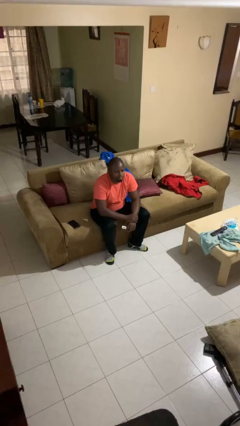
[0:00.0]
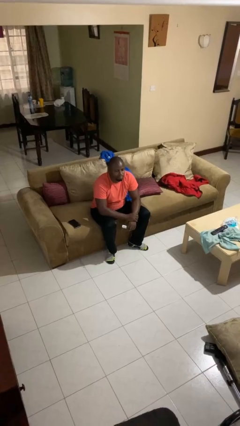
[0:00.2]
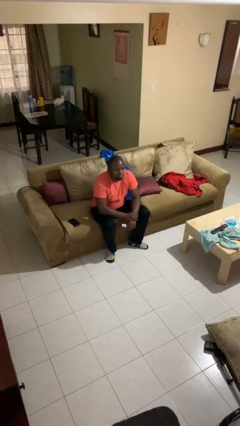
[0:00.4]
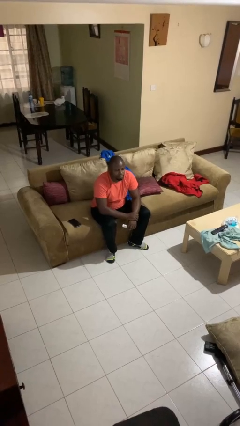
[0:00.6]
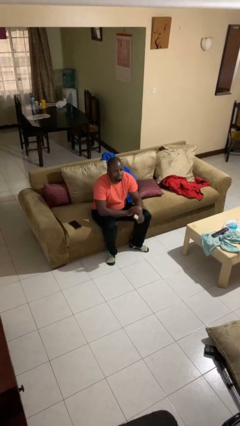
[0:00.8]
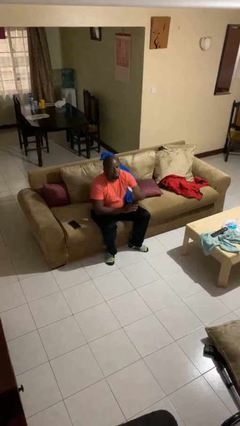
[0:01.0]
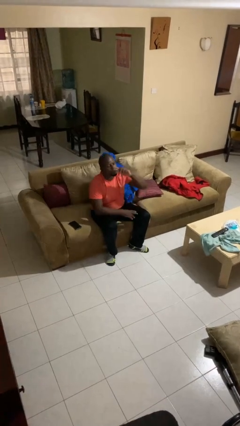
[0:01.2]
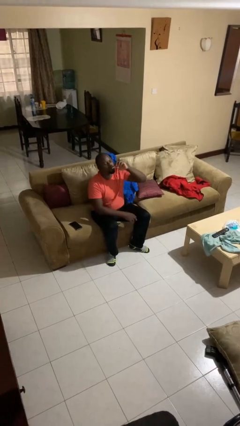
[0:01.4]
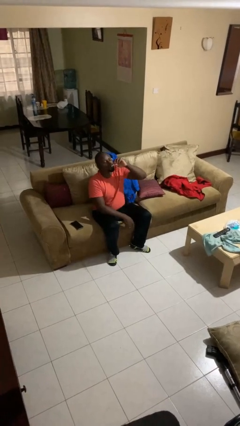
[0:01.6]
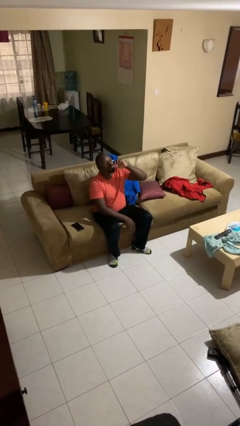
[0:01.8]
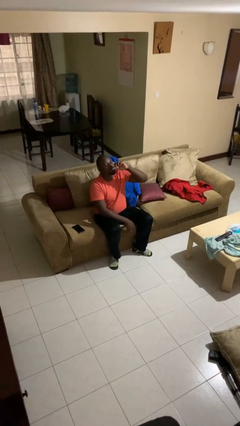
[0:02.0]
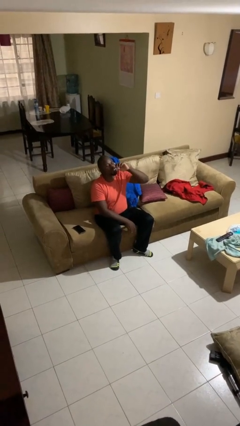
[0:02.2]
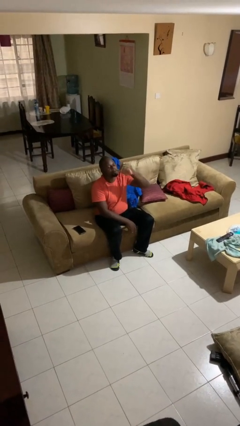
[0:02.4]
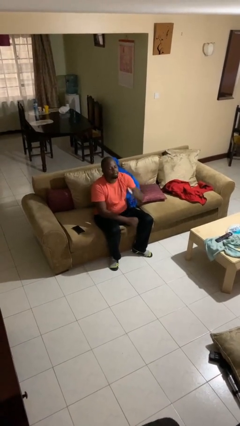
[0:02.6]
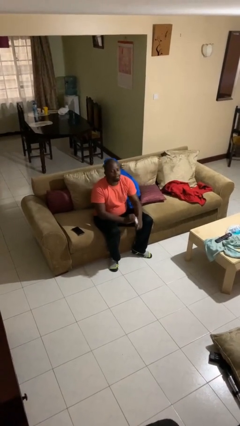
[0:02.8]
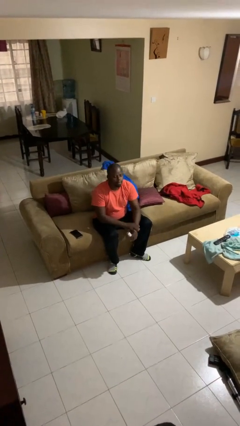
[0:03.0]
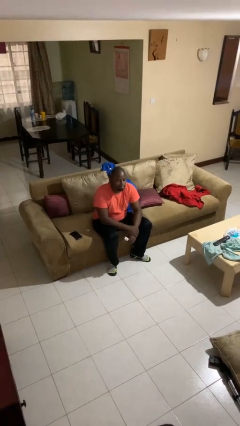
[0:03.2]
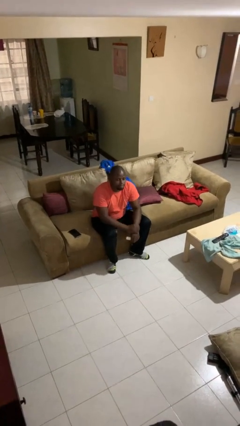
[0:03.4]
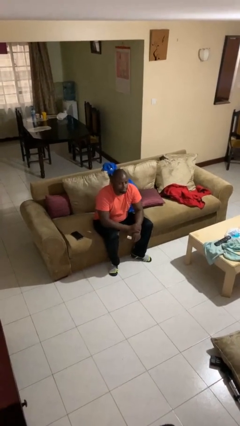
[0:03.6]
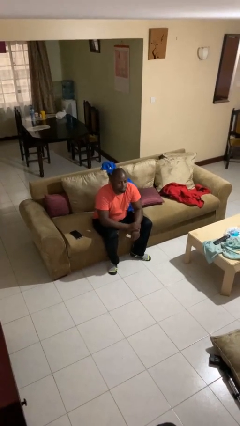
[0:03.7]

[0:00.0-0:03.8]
person vapes

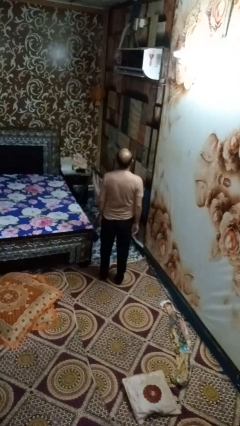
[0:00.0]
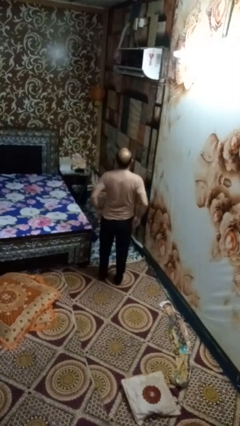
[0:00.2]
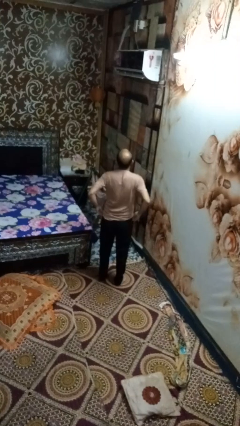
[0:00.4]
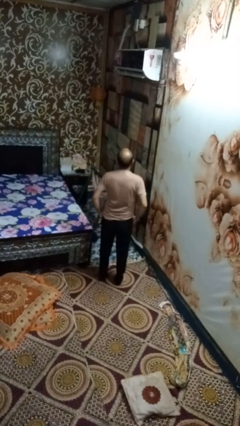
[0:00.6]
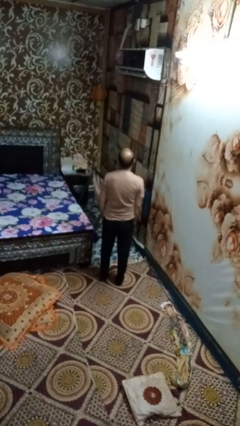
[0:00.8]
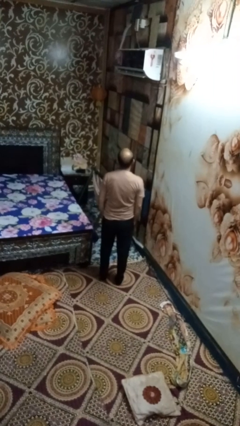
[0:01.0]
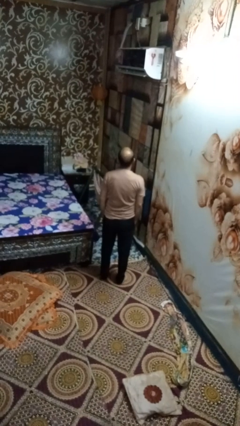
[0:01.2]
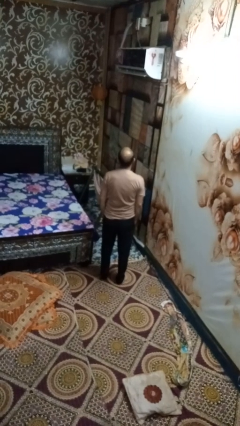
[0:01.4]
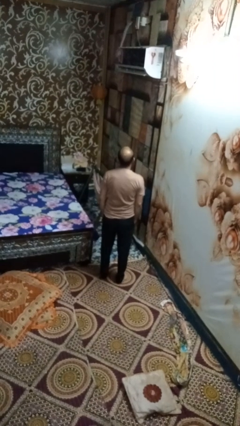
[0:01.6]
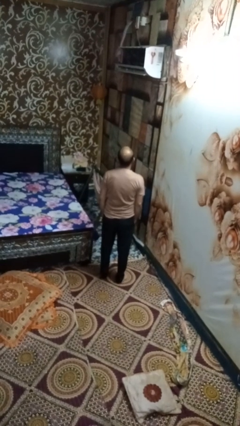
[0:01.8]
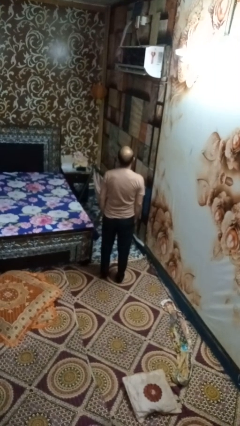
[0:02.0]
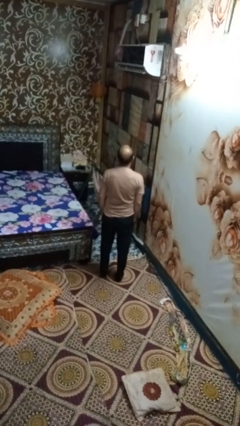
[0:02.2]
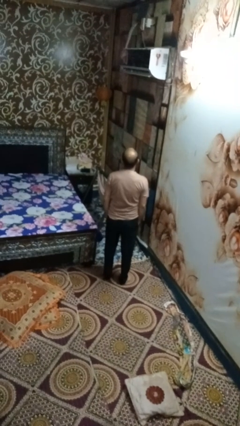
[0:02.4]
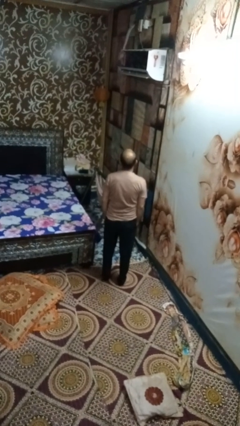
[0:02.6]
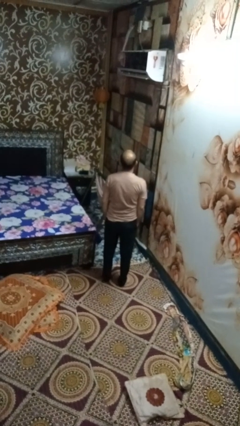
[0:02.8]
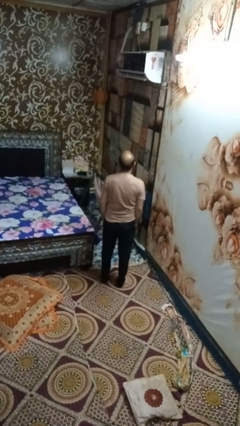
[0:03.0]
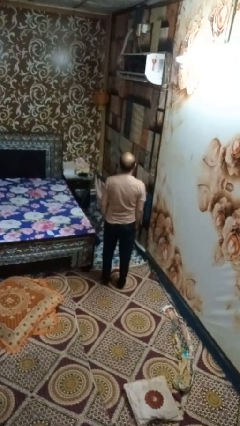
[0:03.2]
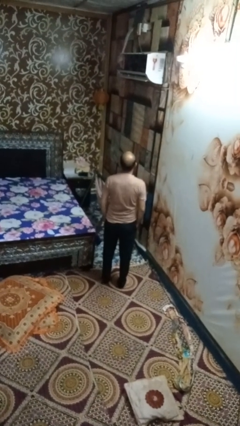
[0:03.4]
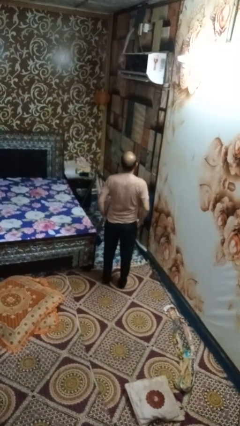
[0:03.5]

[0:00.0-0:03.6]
person puts hands in back pockets

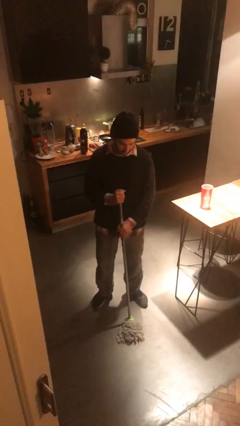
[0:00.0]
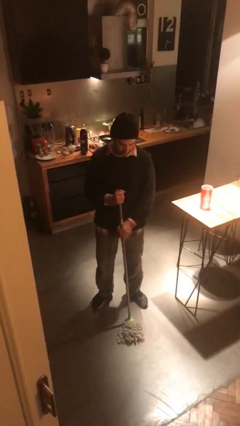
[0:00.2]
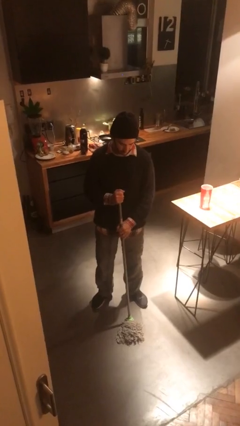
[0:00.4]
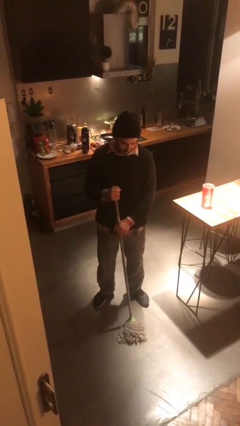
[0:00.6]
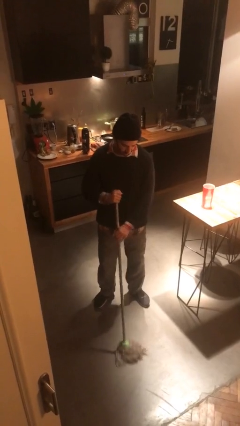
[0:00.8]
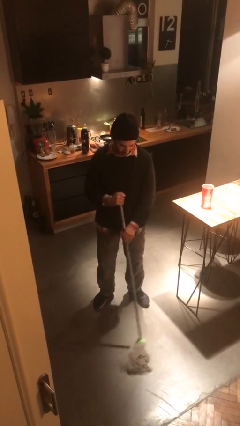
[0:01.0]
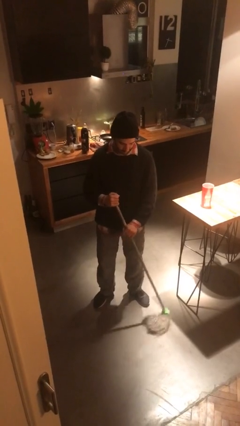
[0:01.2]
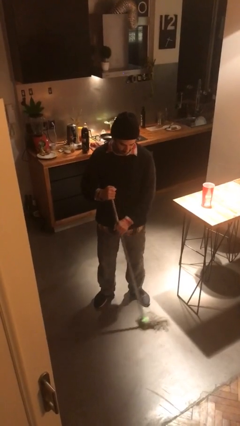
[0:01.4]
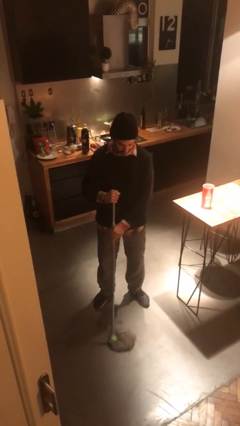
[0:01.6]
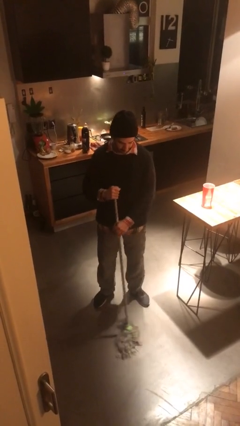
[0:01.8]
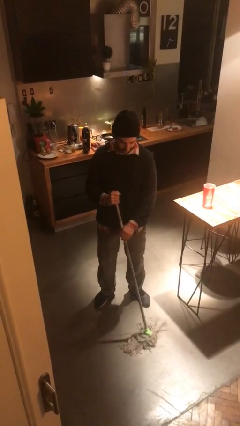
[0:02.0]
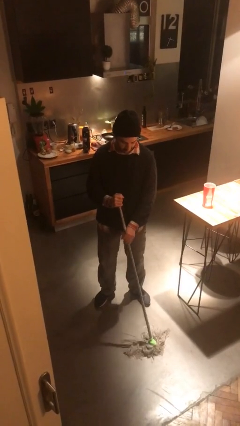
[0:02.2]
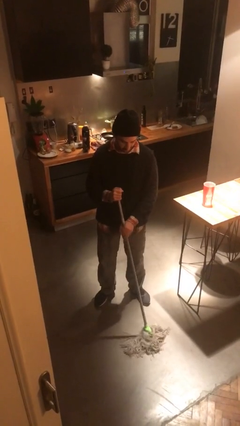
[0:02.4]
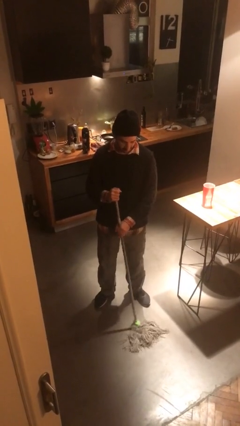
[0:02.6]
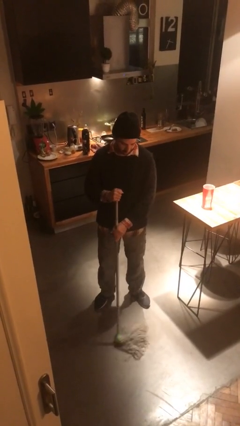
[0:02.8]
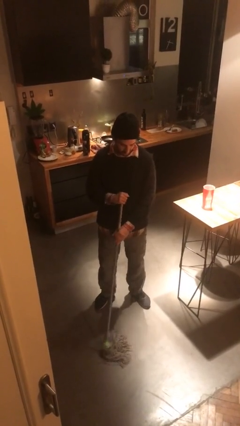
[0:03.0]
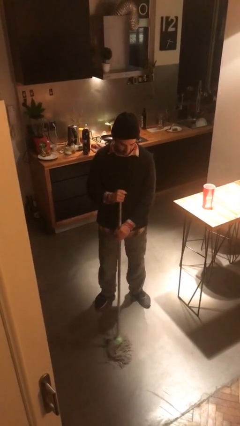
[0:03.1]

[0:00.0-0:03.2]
person mops

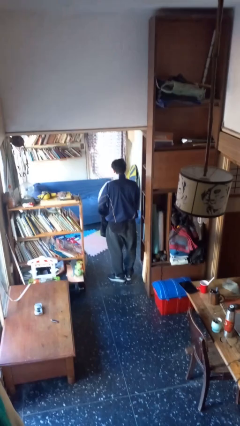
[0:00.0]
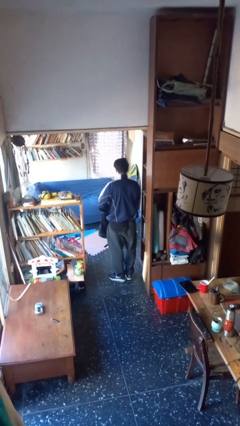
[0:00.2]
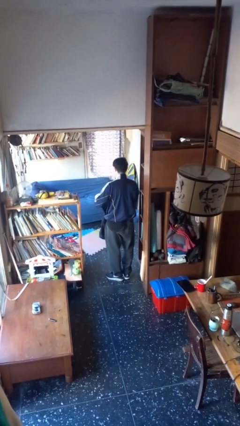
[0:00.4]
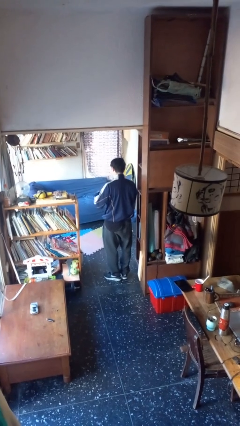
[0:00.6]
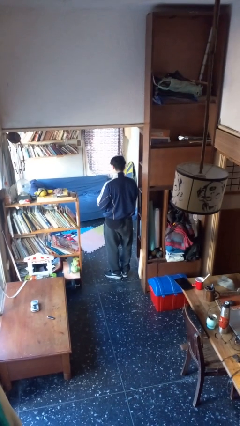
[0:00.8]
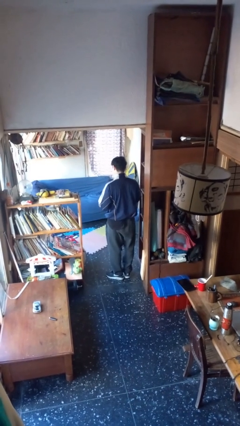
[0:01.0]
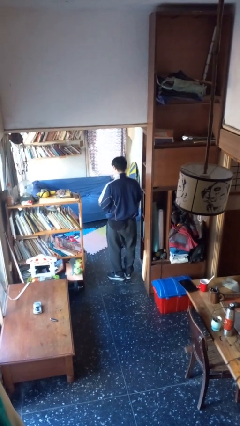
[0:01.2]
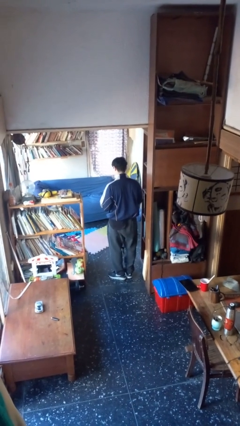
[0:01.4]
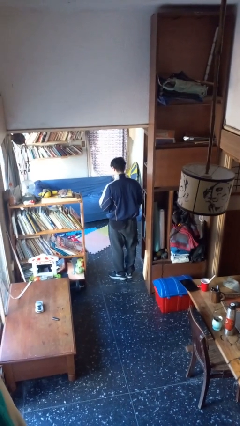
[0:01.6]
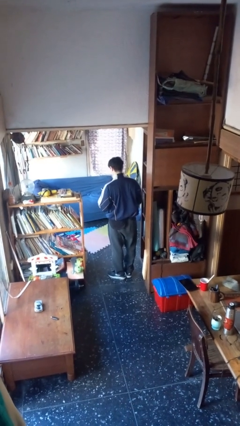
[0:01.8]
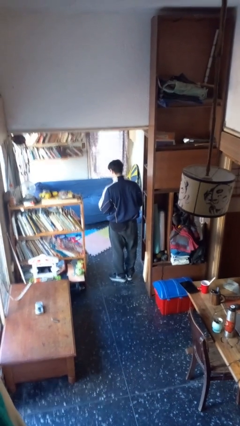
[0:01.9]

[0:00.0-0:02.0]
person takes object from backpack

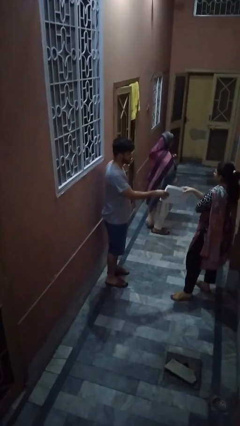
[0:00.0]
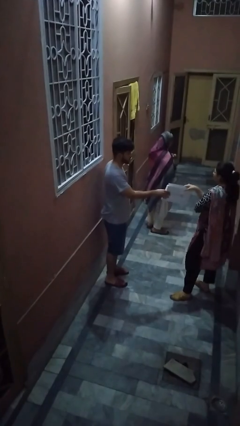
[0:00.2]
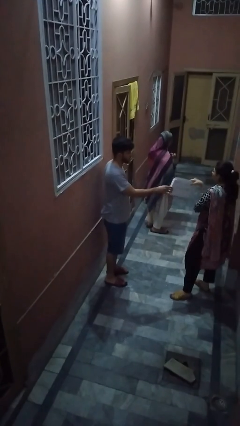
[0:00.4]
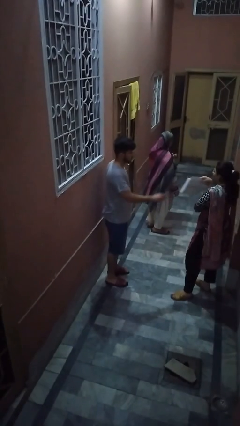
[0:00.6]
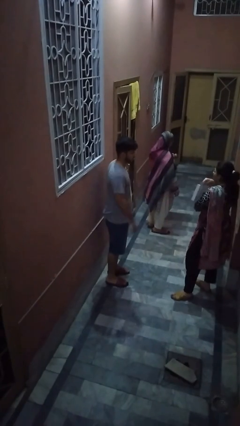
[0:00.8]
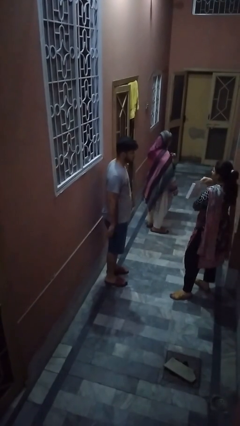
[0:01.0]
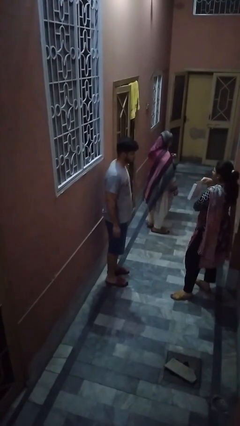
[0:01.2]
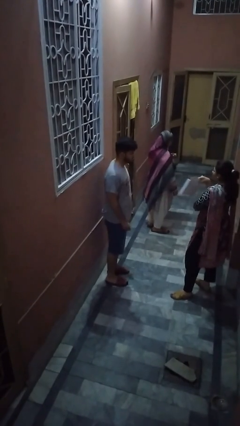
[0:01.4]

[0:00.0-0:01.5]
person transfers object to person

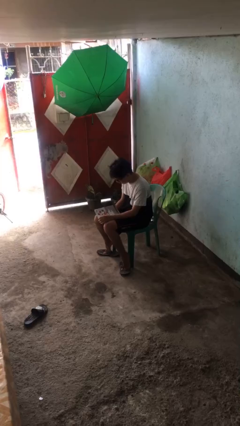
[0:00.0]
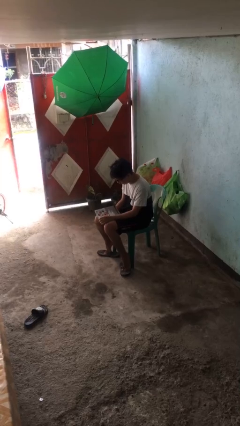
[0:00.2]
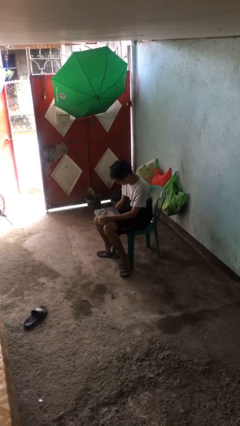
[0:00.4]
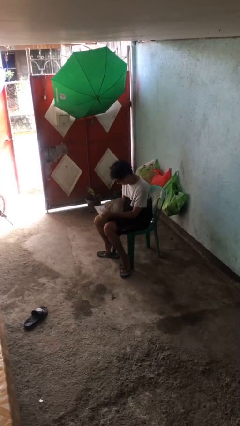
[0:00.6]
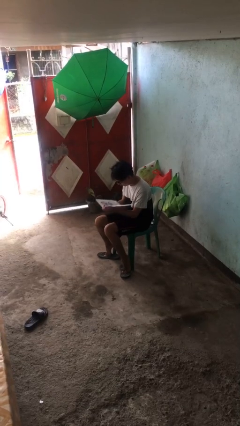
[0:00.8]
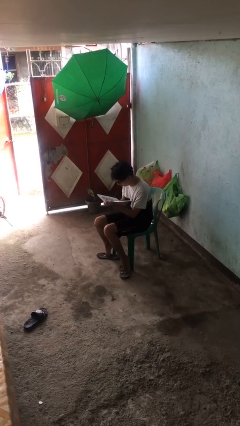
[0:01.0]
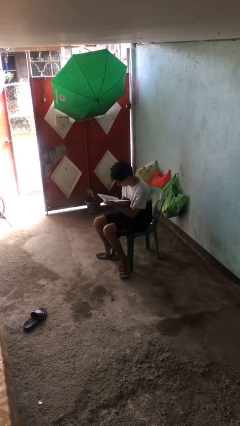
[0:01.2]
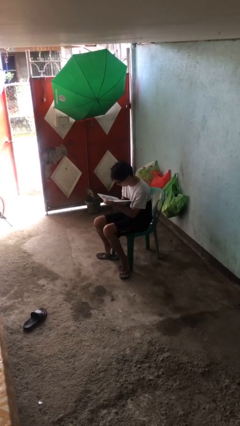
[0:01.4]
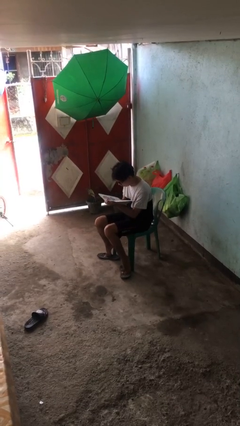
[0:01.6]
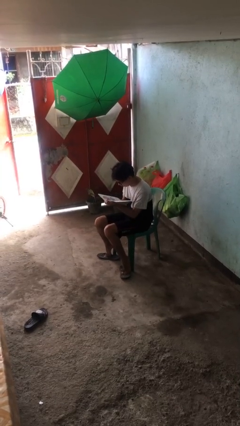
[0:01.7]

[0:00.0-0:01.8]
person reads document

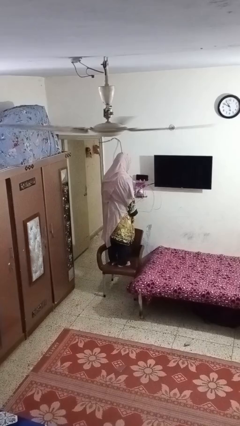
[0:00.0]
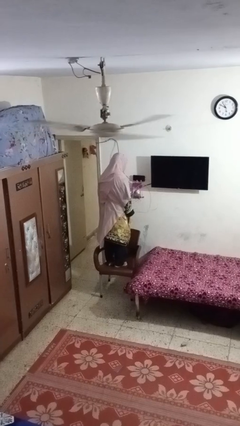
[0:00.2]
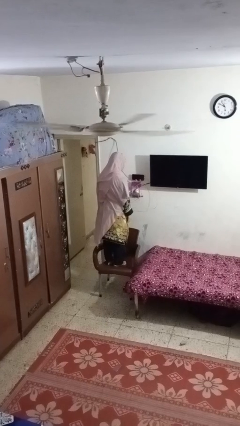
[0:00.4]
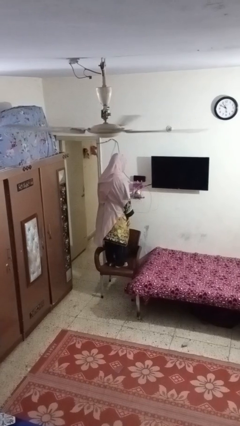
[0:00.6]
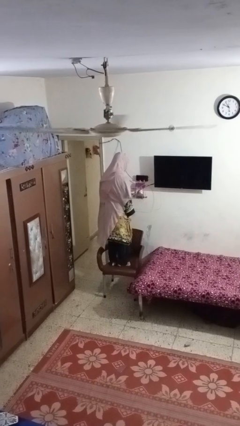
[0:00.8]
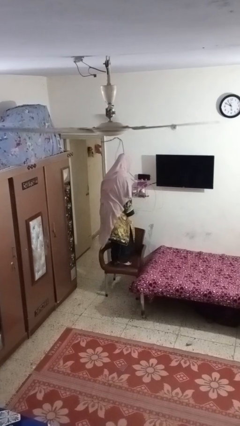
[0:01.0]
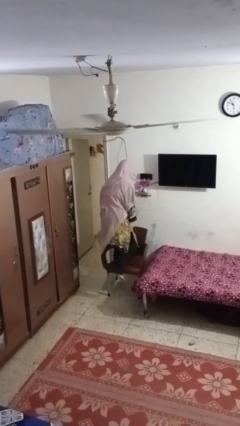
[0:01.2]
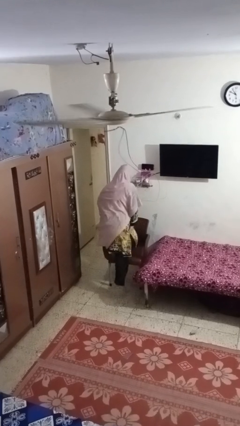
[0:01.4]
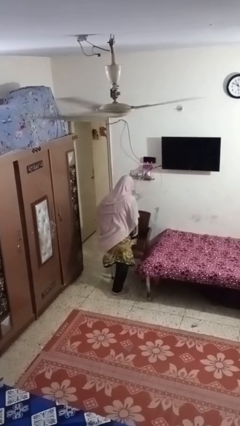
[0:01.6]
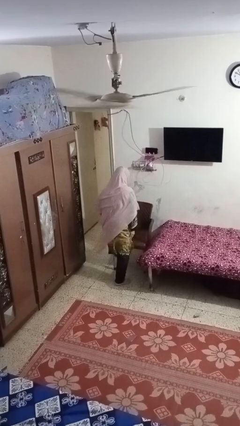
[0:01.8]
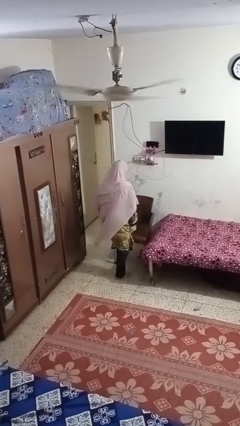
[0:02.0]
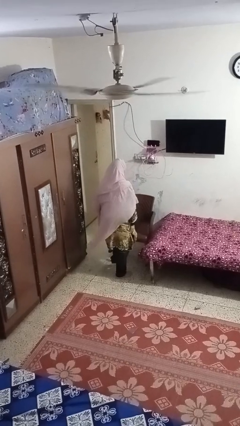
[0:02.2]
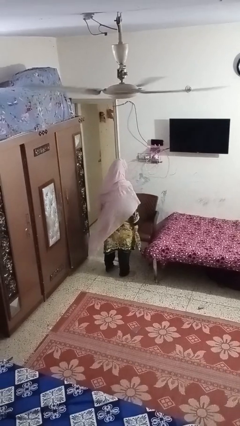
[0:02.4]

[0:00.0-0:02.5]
person climbs off chair
